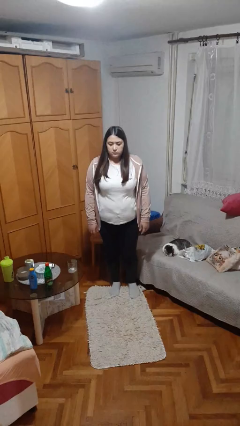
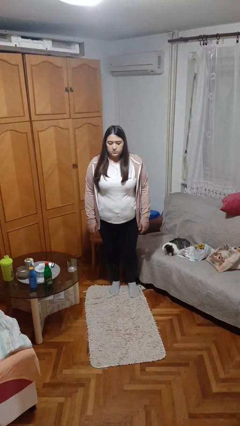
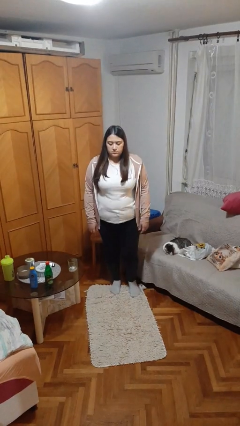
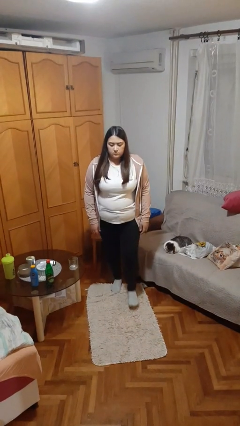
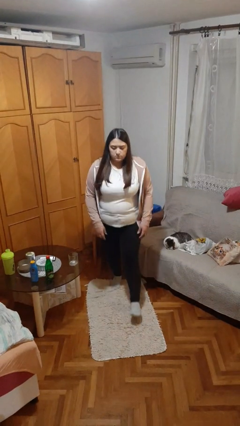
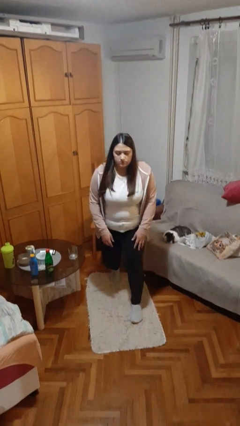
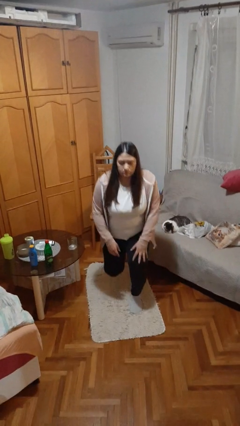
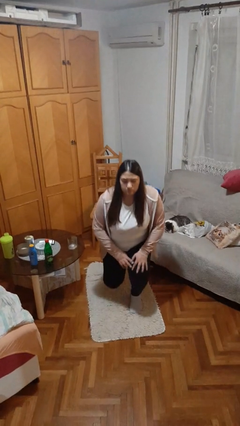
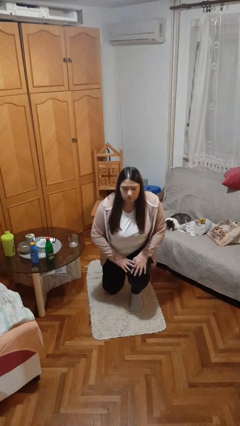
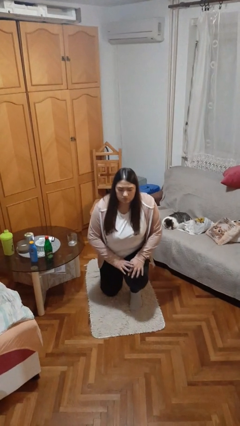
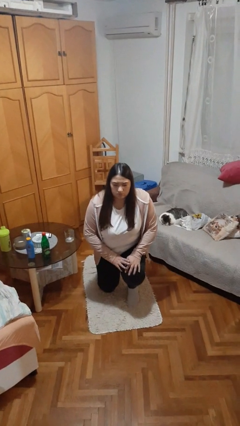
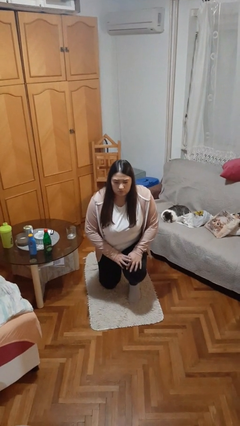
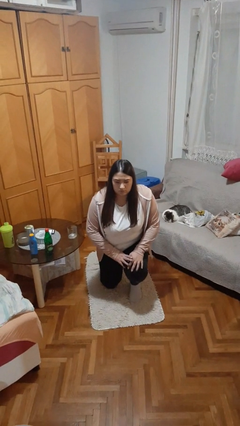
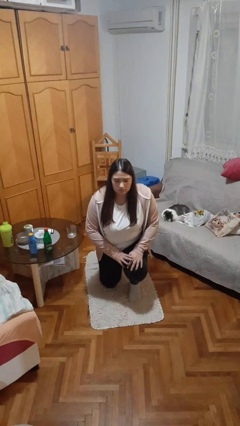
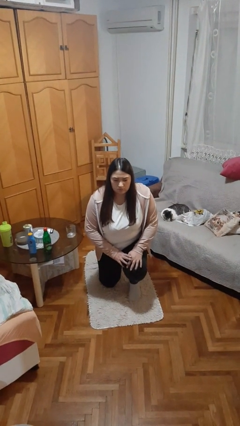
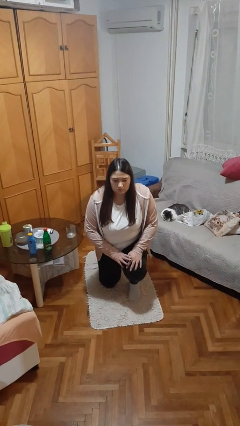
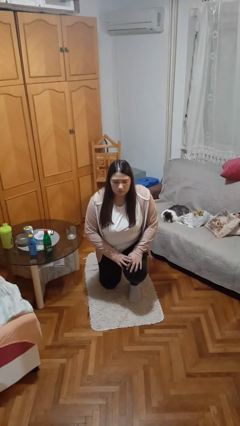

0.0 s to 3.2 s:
person kneels

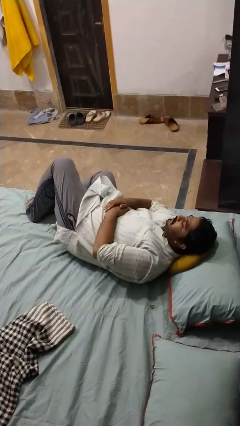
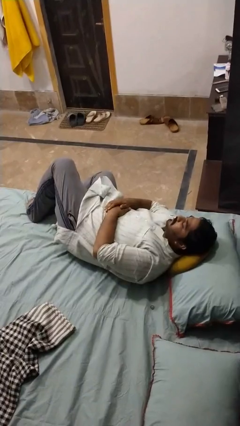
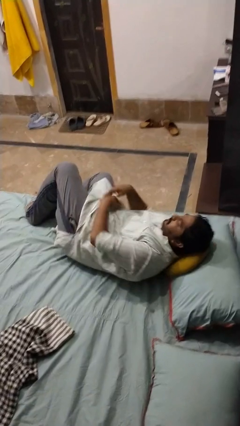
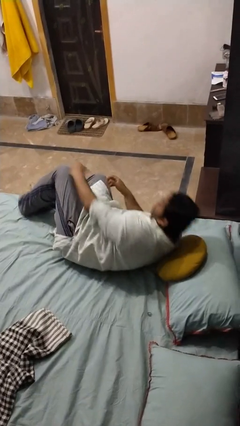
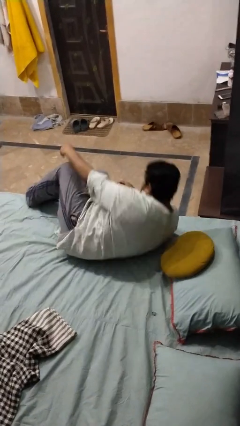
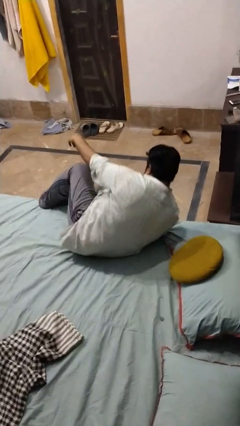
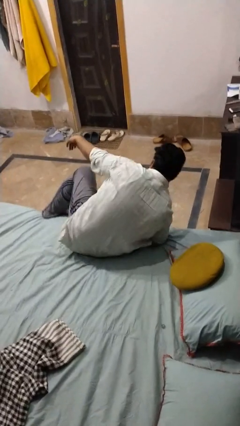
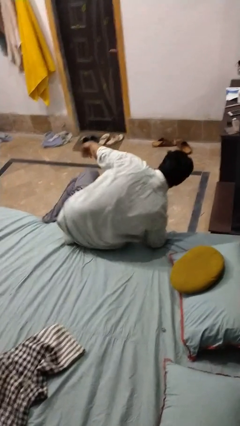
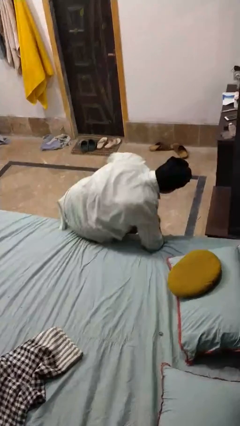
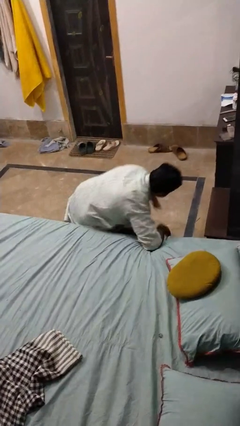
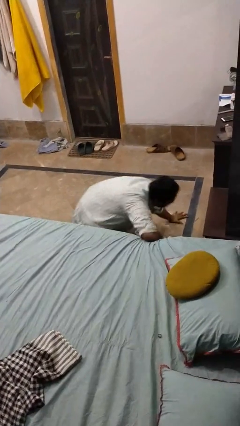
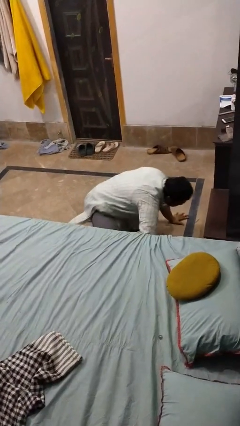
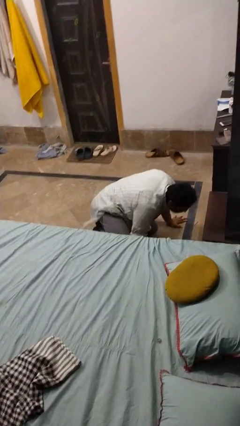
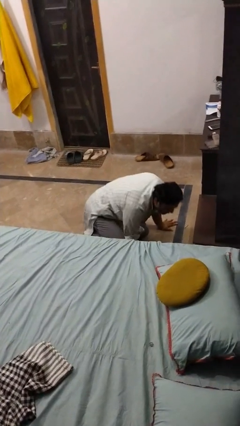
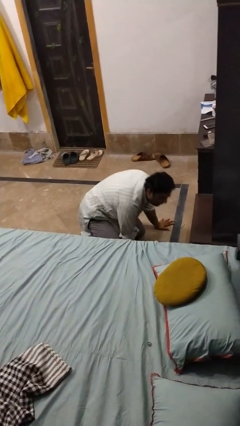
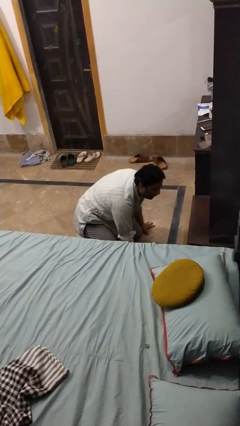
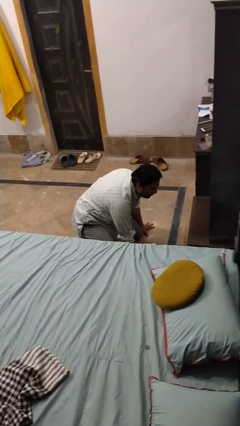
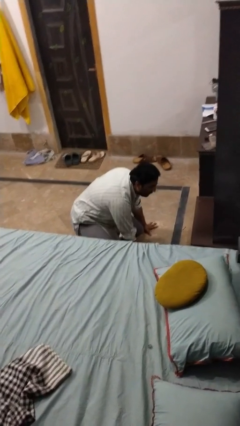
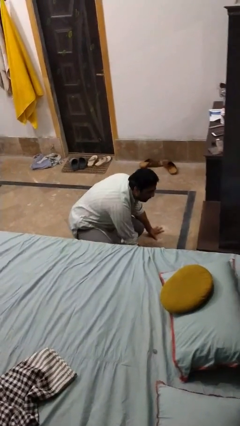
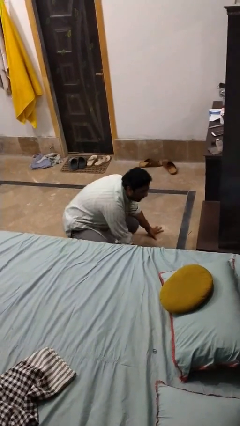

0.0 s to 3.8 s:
person falls from bed

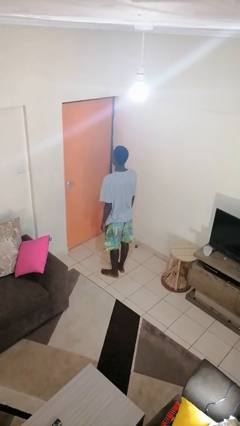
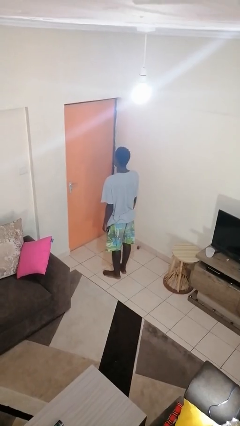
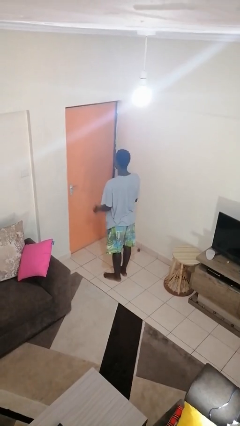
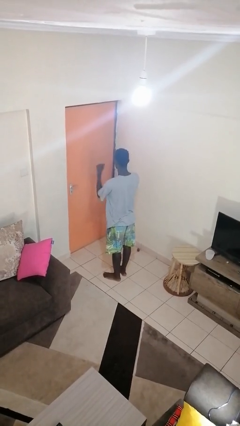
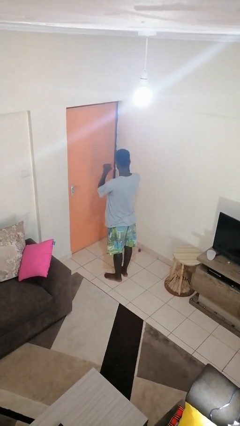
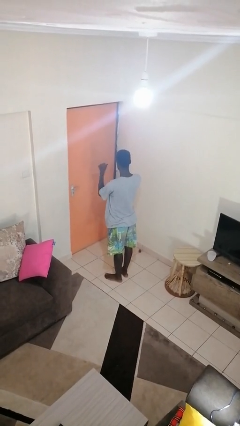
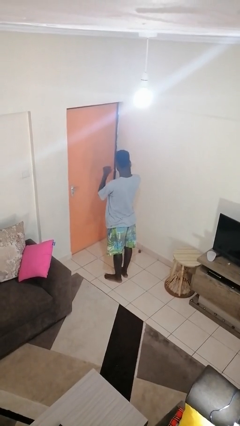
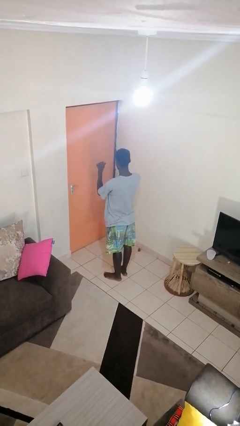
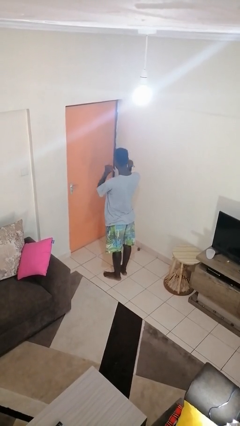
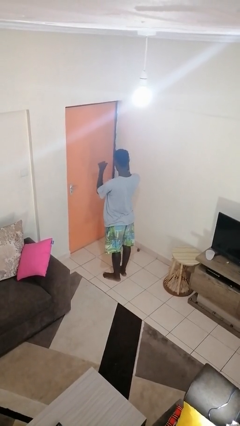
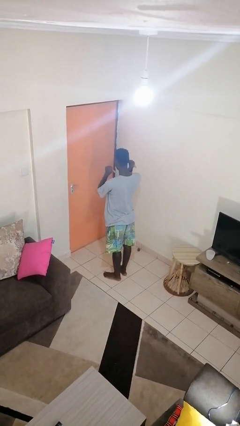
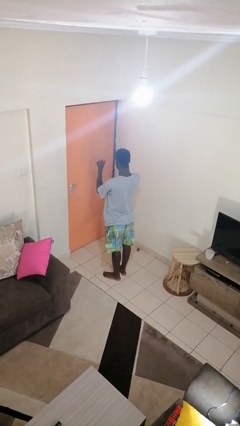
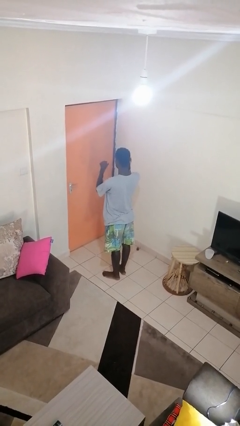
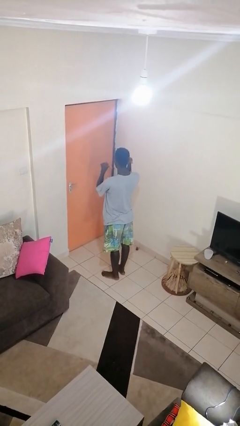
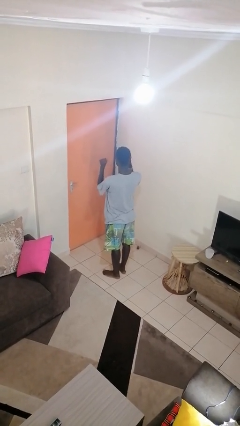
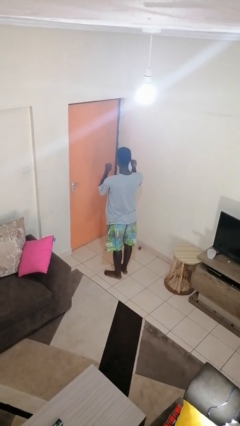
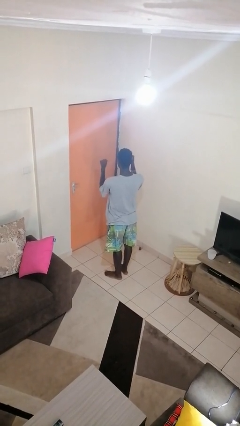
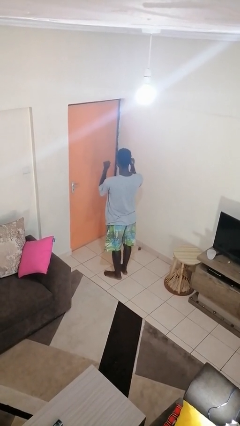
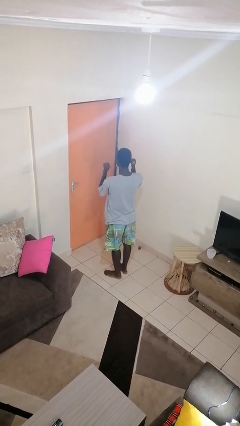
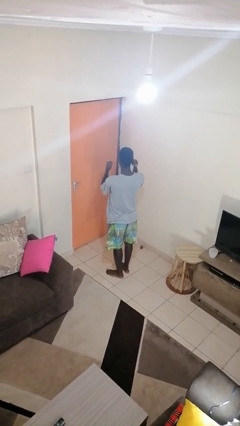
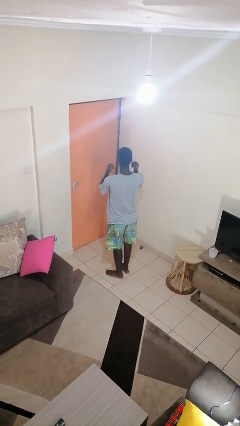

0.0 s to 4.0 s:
person gestures behind me

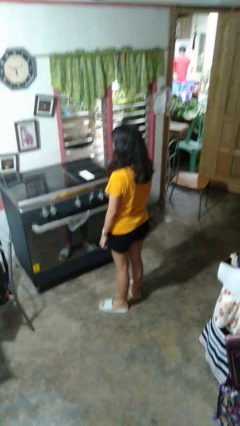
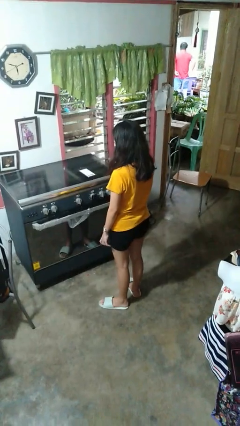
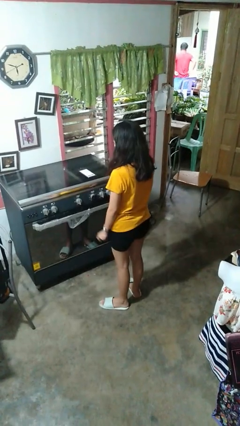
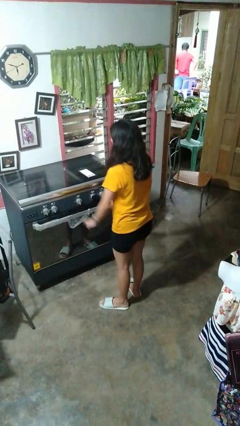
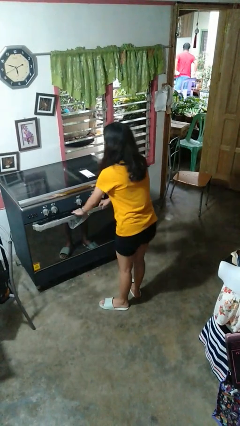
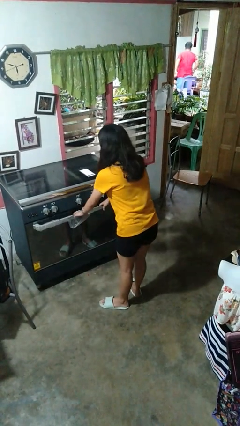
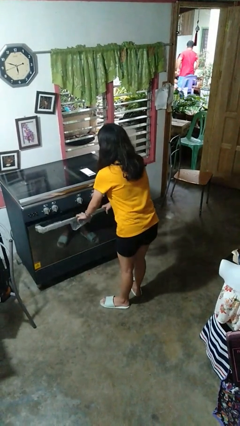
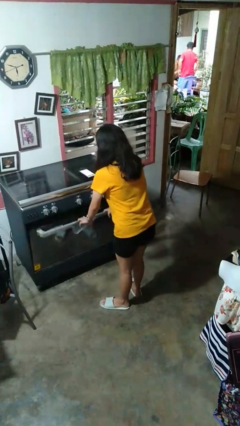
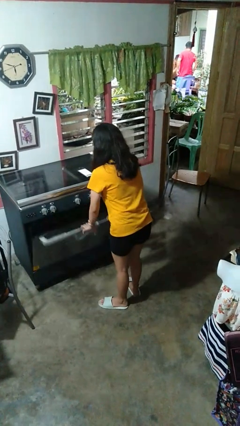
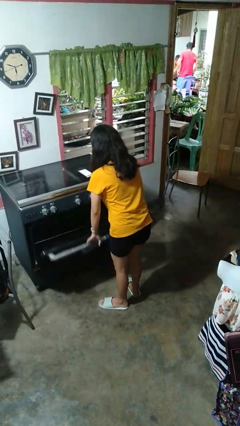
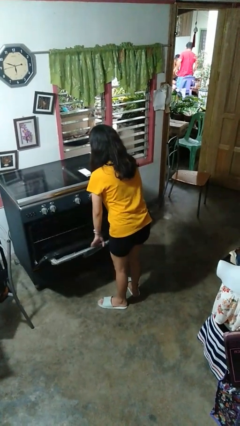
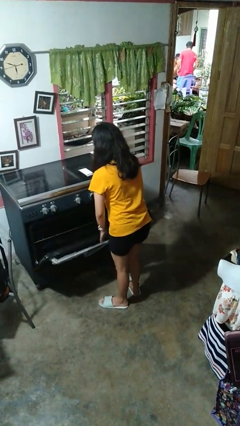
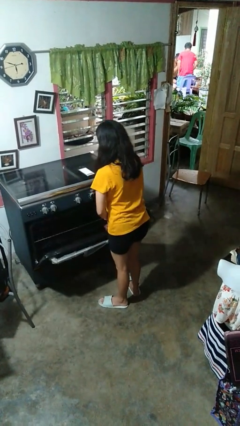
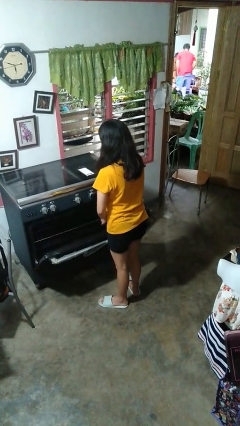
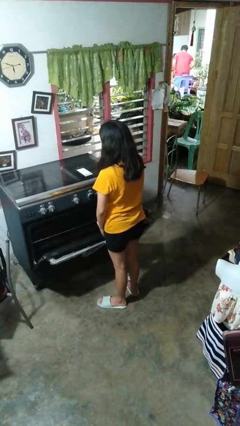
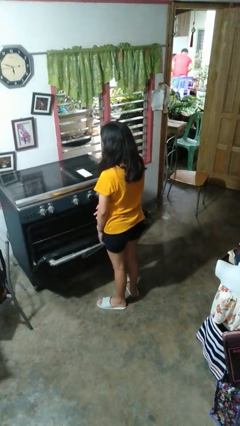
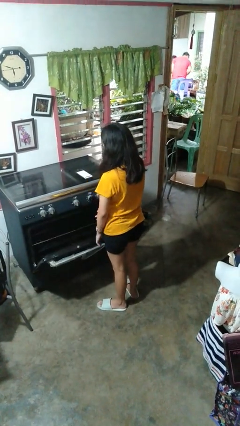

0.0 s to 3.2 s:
person opens oven door

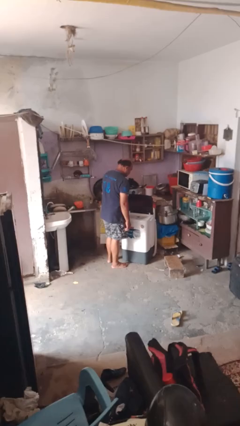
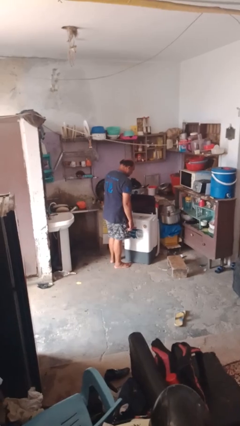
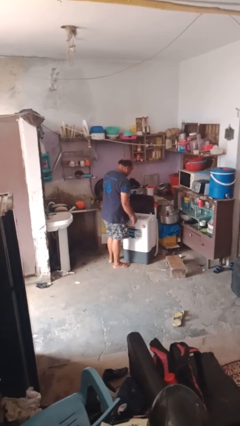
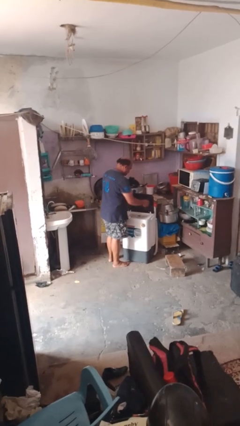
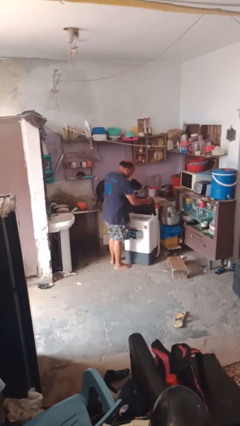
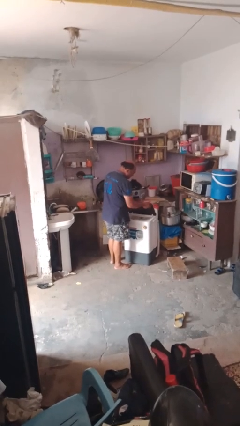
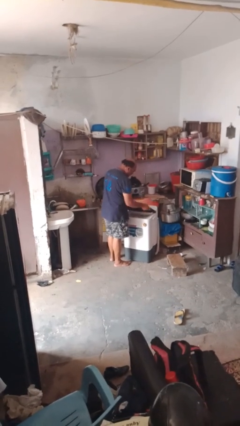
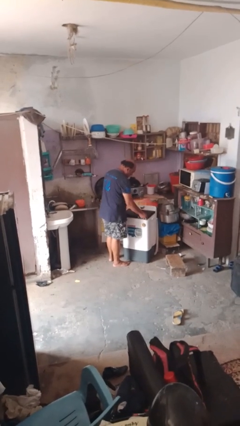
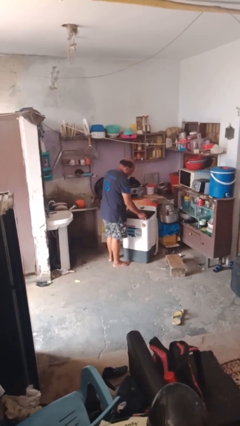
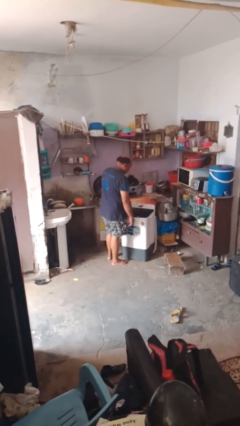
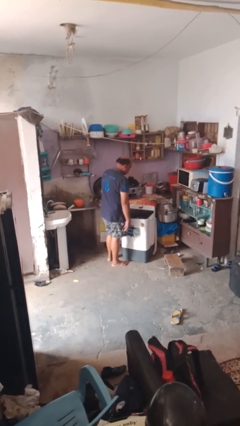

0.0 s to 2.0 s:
person closes clothes washer

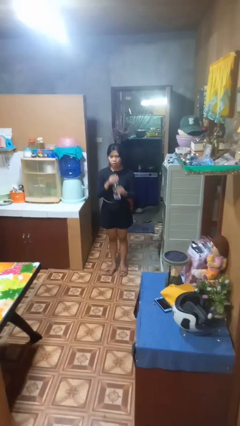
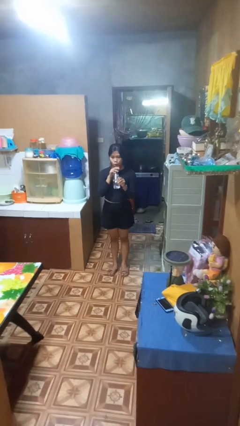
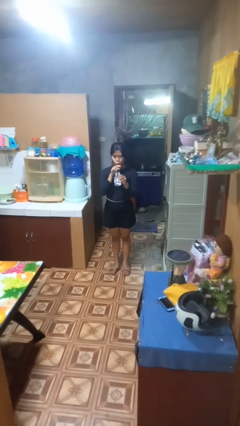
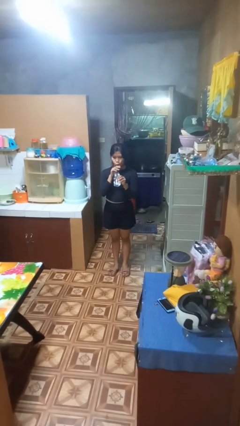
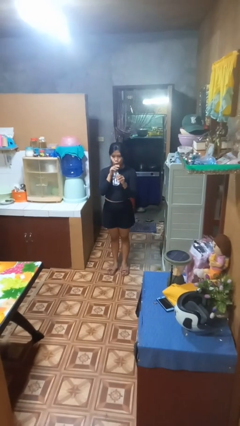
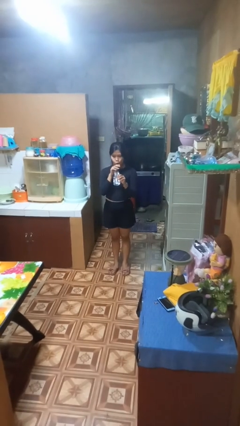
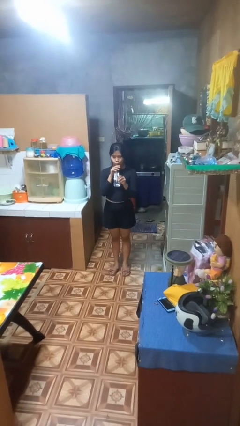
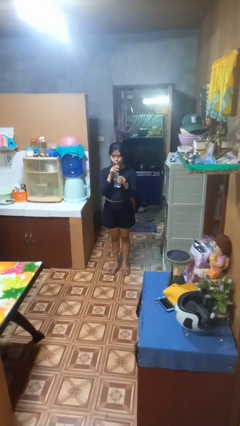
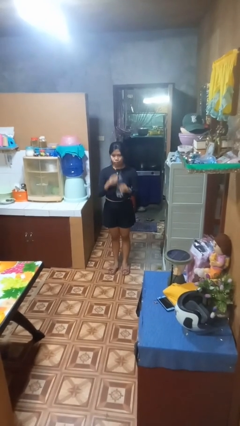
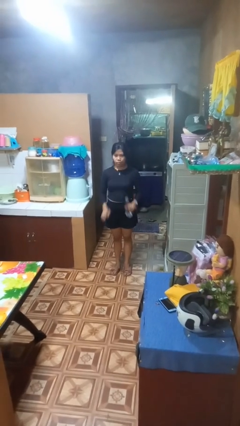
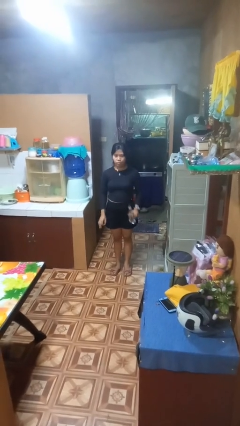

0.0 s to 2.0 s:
person drinks from straw
